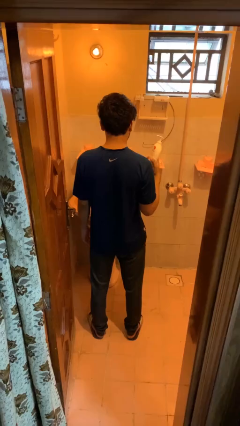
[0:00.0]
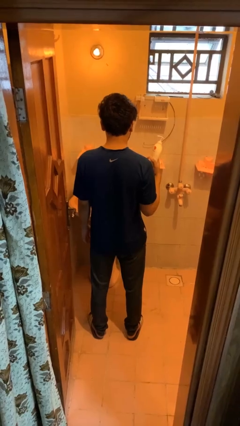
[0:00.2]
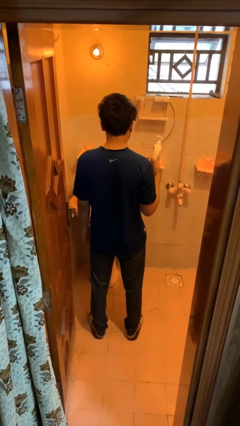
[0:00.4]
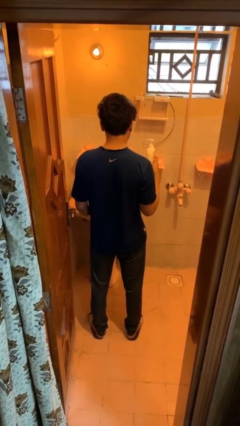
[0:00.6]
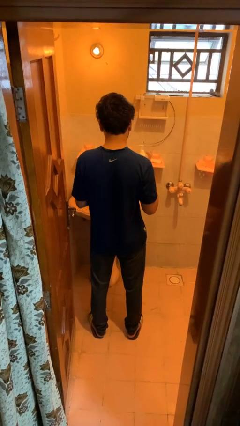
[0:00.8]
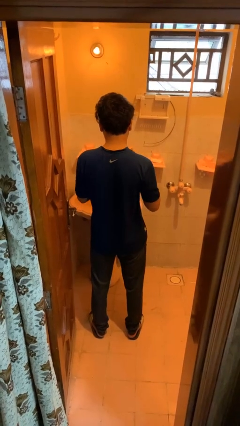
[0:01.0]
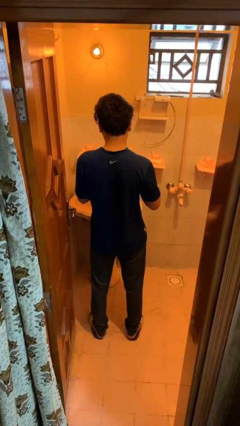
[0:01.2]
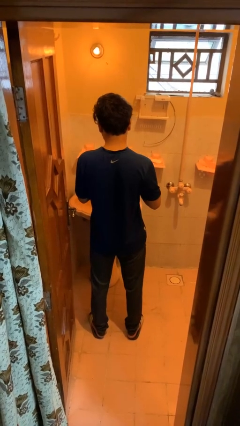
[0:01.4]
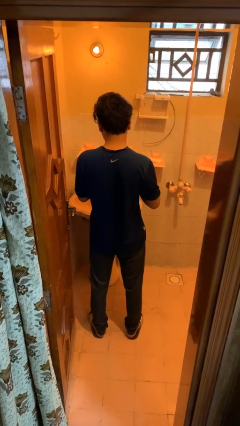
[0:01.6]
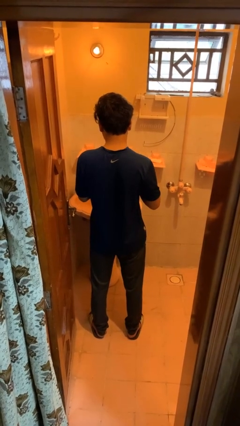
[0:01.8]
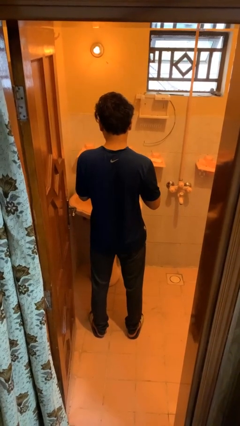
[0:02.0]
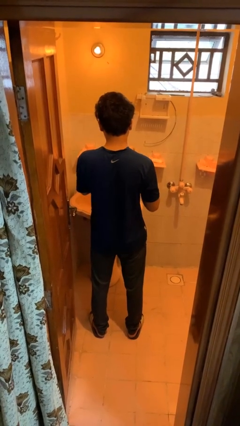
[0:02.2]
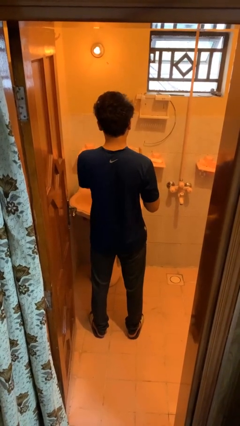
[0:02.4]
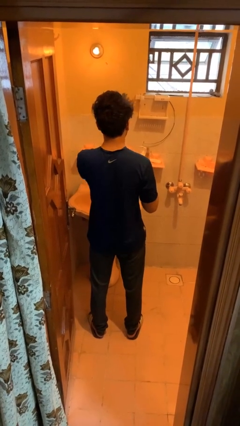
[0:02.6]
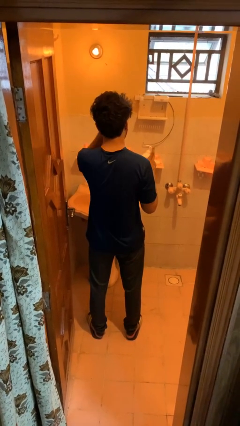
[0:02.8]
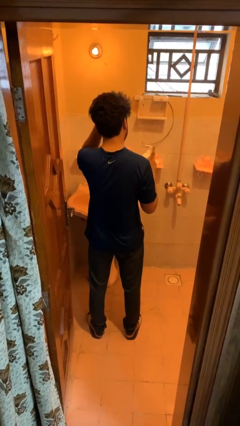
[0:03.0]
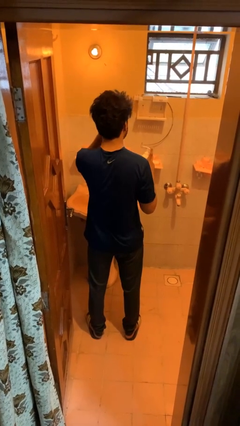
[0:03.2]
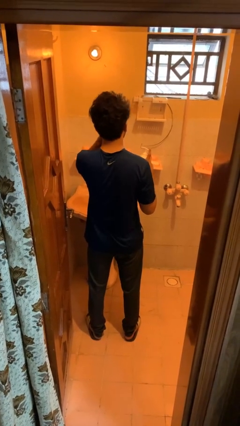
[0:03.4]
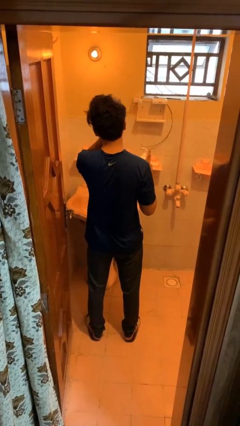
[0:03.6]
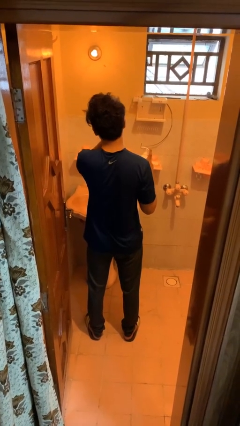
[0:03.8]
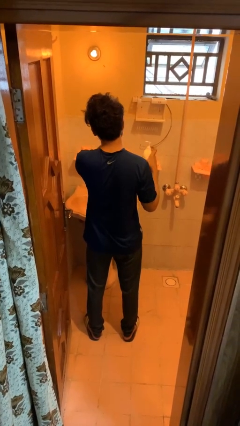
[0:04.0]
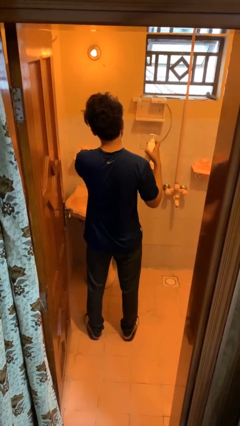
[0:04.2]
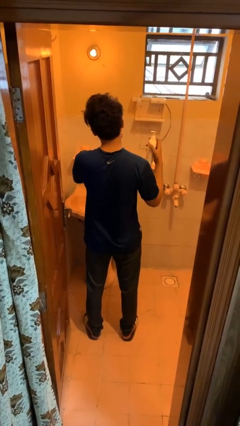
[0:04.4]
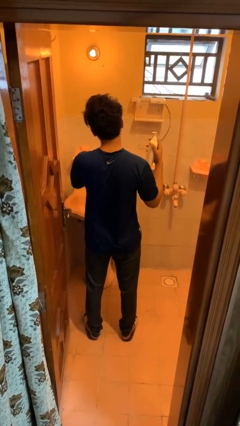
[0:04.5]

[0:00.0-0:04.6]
person applies facial moisturizer

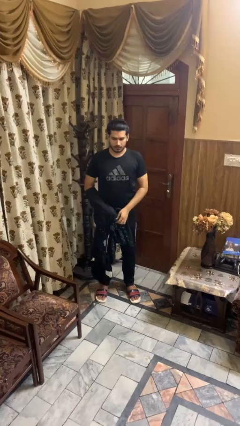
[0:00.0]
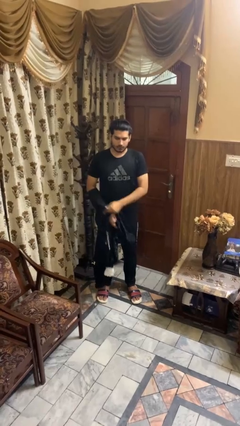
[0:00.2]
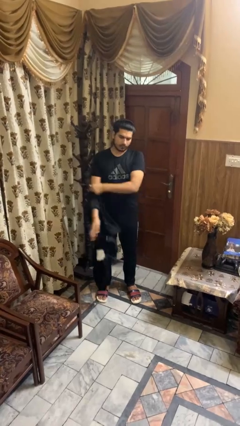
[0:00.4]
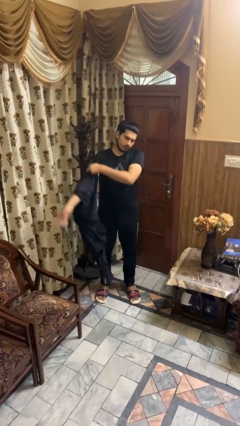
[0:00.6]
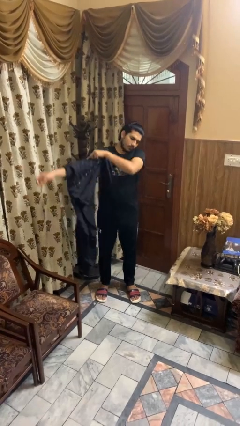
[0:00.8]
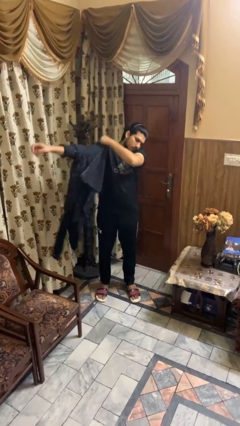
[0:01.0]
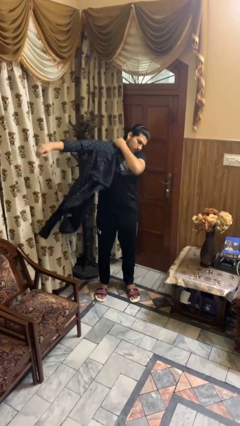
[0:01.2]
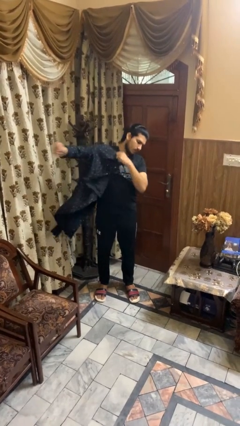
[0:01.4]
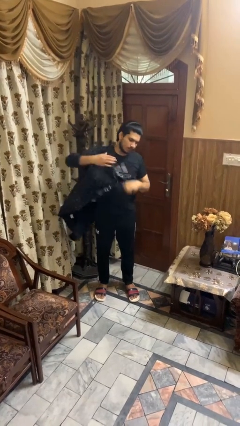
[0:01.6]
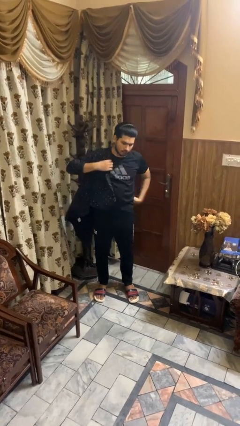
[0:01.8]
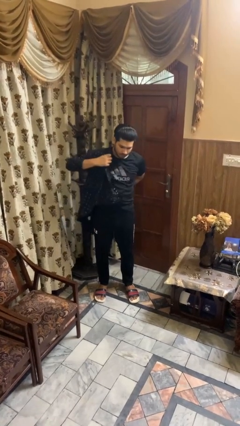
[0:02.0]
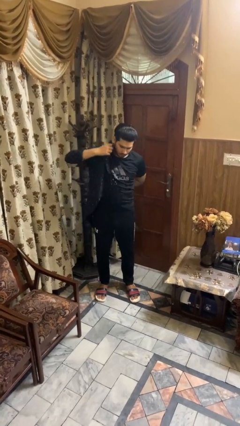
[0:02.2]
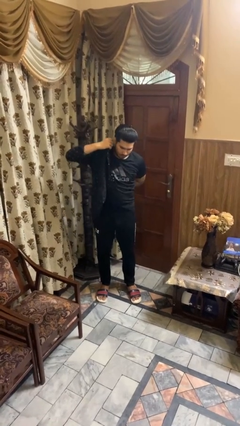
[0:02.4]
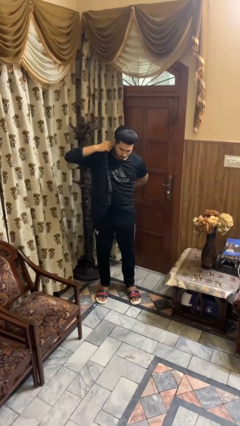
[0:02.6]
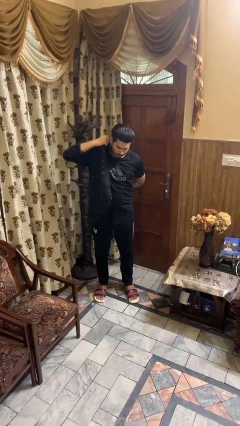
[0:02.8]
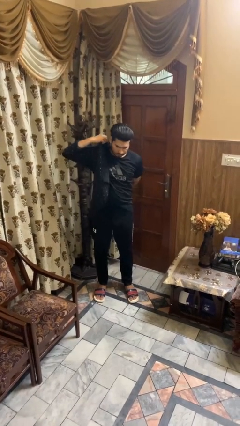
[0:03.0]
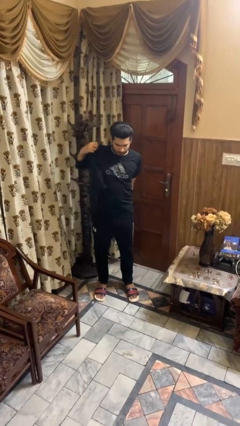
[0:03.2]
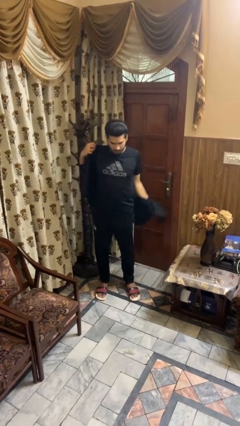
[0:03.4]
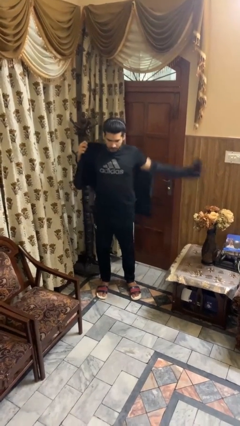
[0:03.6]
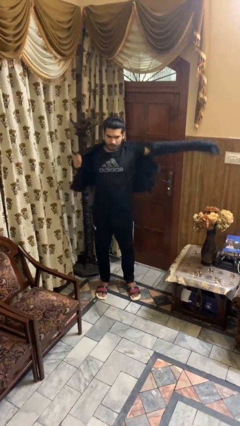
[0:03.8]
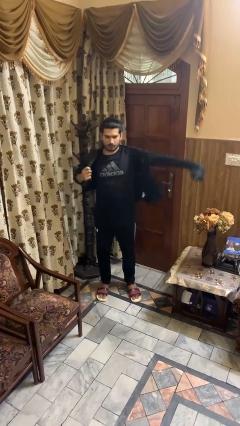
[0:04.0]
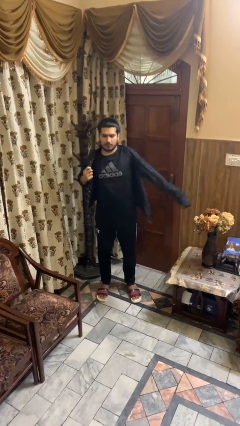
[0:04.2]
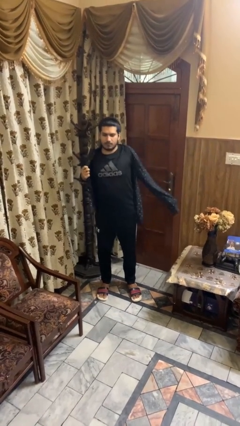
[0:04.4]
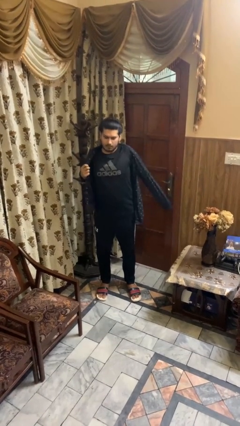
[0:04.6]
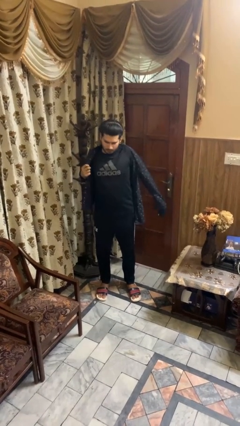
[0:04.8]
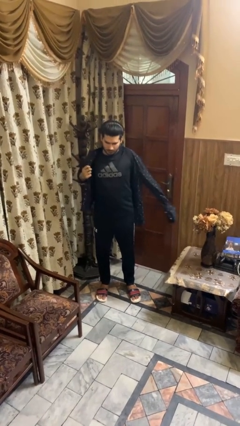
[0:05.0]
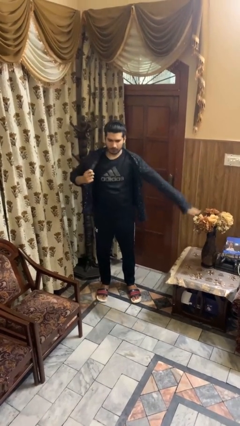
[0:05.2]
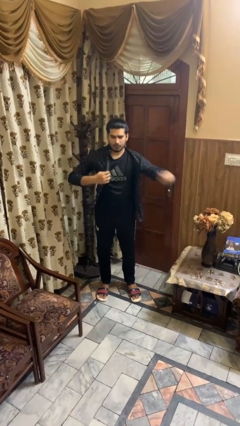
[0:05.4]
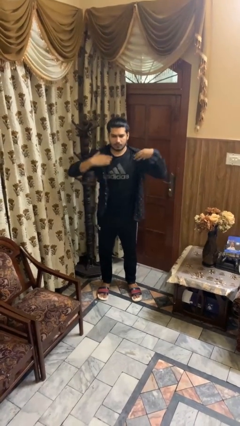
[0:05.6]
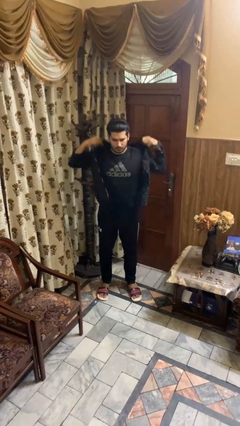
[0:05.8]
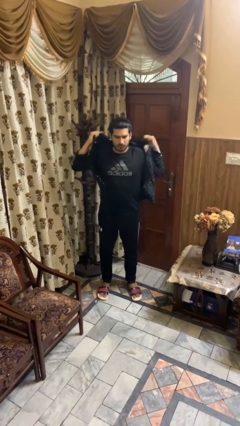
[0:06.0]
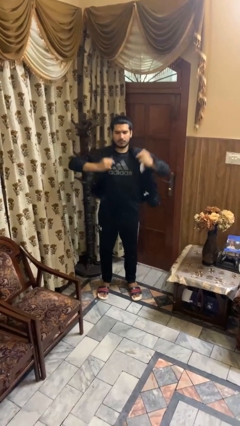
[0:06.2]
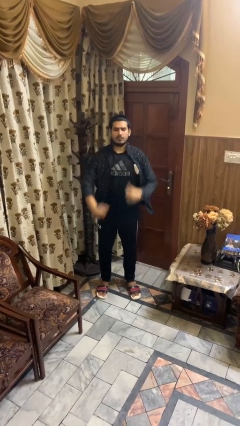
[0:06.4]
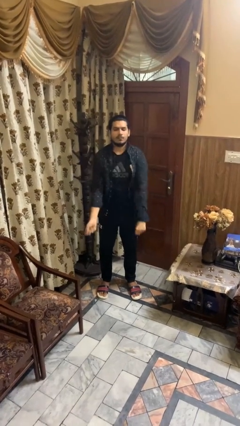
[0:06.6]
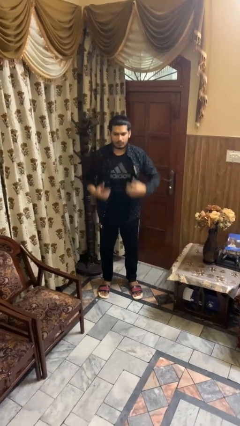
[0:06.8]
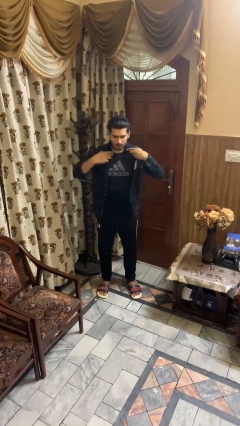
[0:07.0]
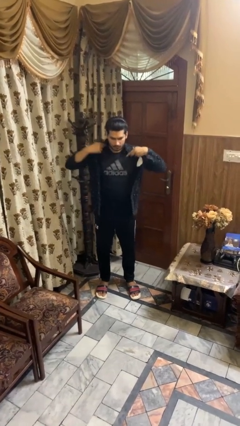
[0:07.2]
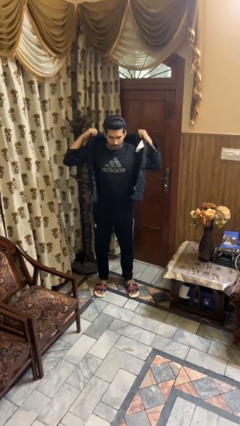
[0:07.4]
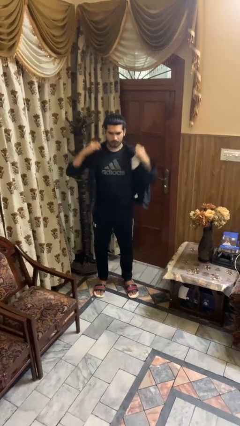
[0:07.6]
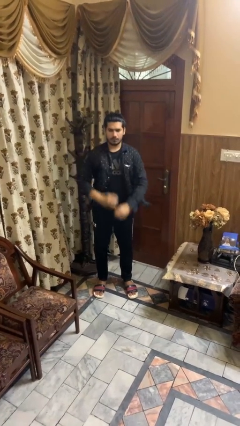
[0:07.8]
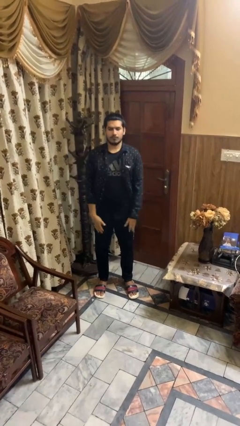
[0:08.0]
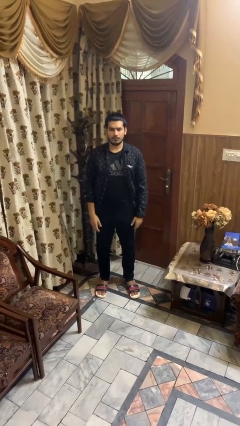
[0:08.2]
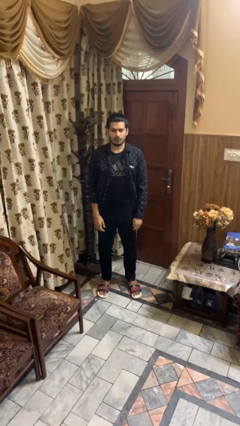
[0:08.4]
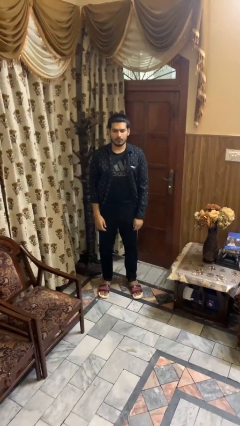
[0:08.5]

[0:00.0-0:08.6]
person puts on shirt

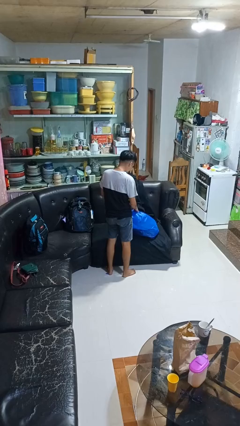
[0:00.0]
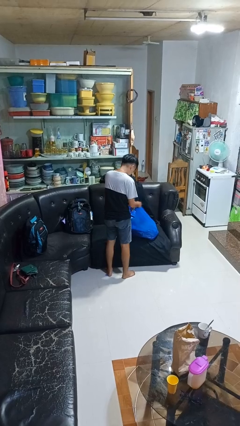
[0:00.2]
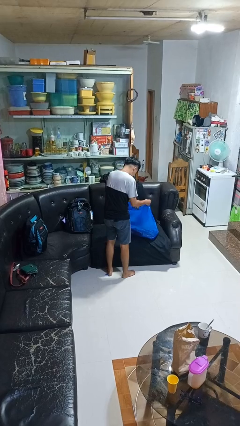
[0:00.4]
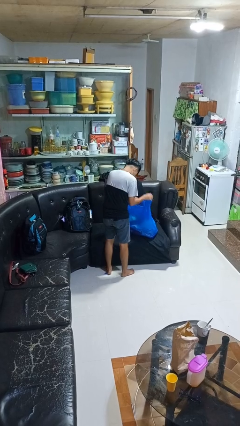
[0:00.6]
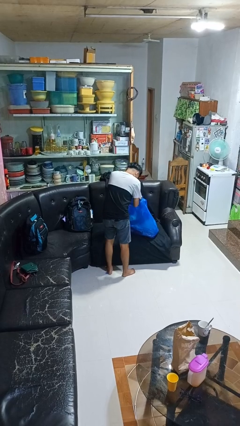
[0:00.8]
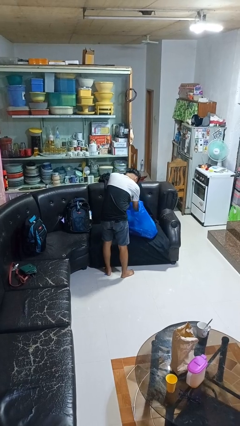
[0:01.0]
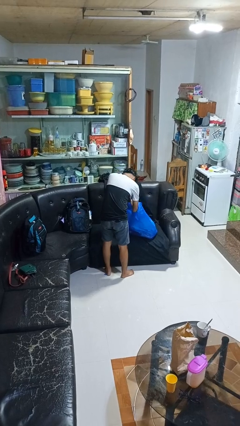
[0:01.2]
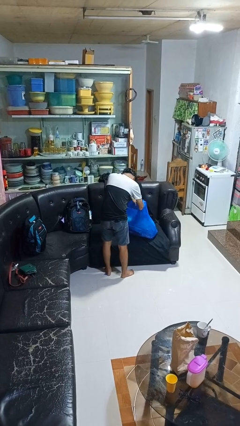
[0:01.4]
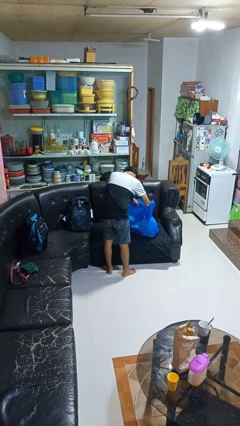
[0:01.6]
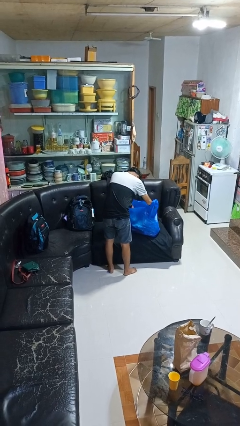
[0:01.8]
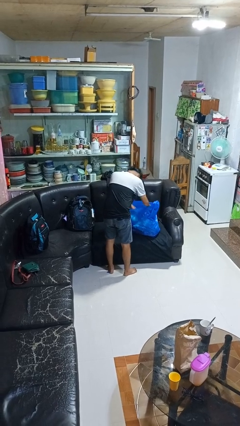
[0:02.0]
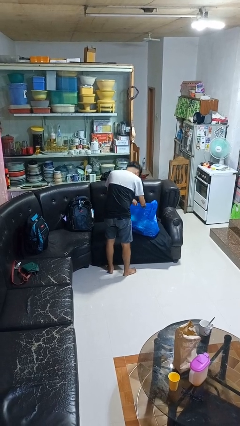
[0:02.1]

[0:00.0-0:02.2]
person searches in bag

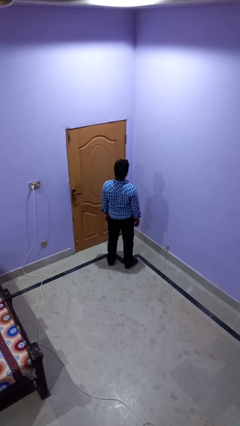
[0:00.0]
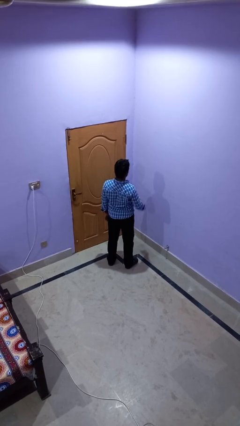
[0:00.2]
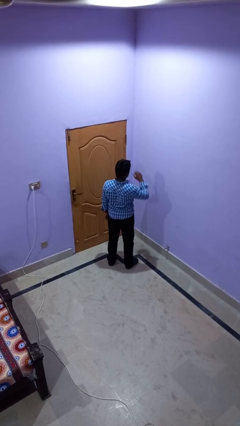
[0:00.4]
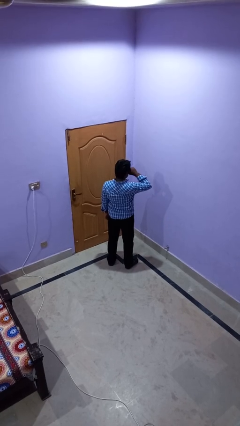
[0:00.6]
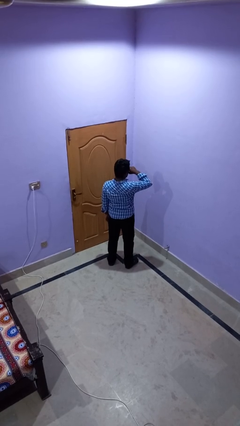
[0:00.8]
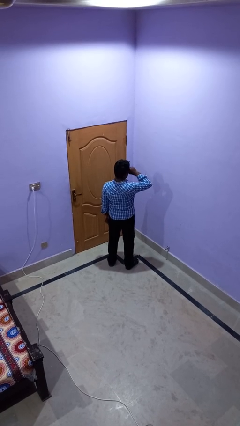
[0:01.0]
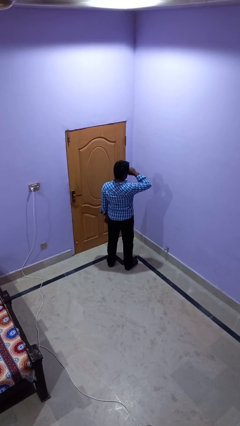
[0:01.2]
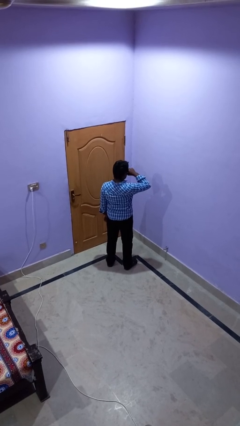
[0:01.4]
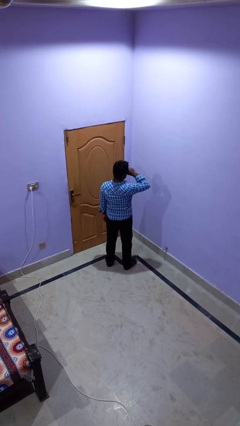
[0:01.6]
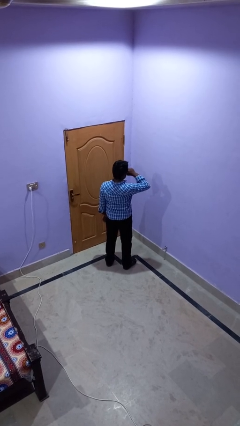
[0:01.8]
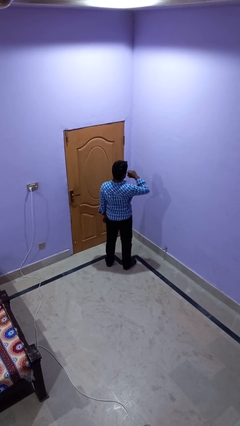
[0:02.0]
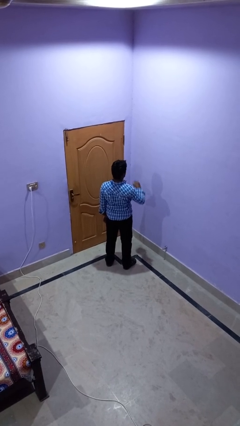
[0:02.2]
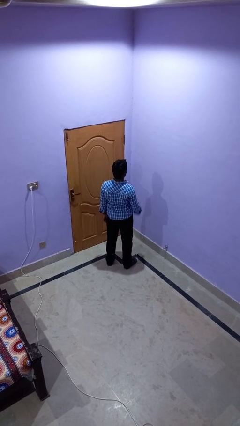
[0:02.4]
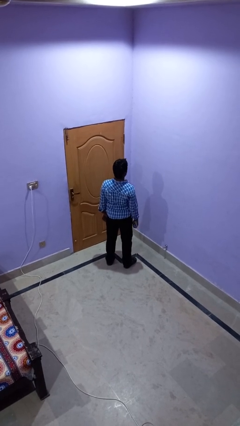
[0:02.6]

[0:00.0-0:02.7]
person rubs eyes
